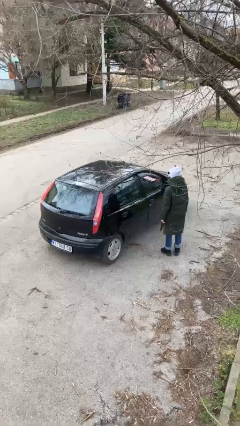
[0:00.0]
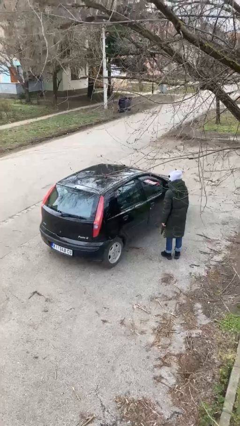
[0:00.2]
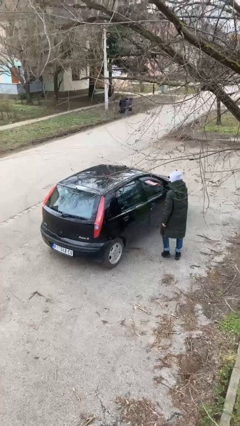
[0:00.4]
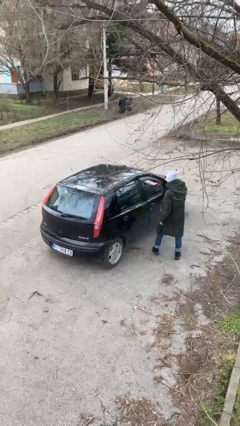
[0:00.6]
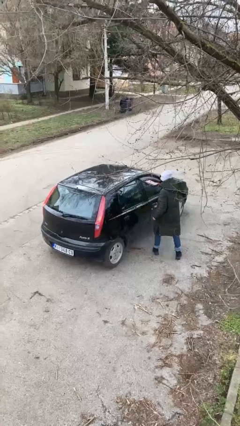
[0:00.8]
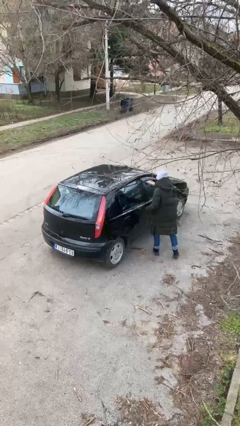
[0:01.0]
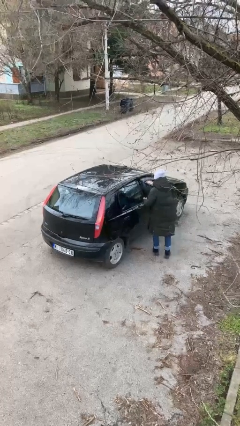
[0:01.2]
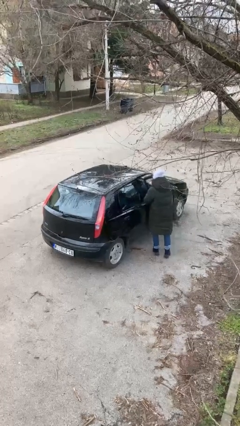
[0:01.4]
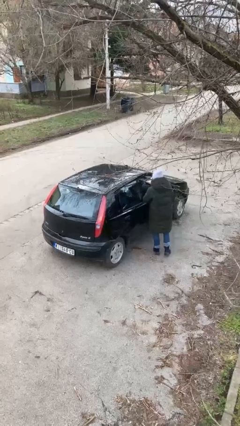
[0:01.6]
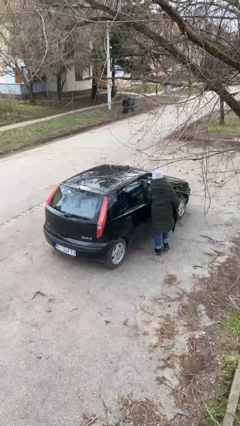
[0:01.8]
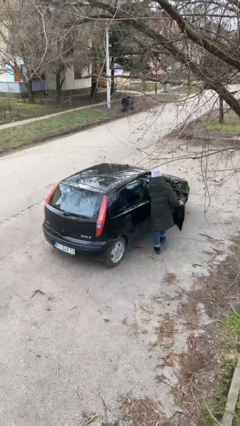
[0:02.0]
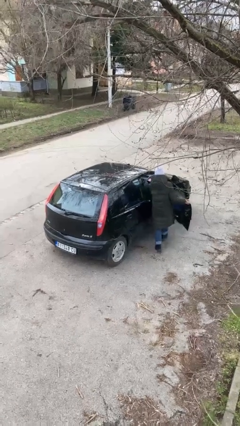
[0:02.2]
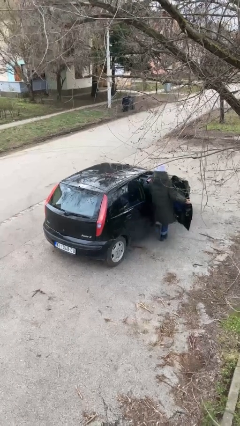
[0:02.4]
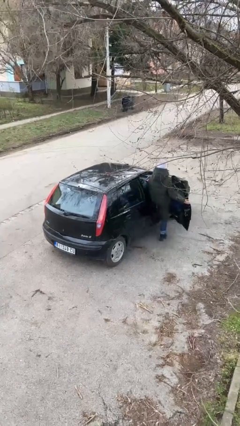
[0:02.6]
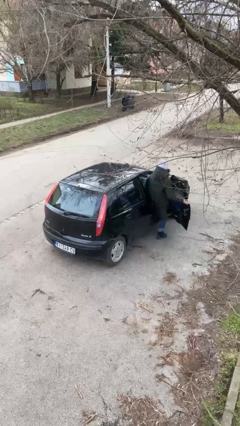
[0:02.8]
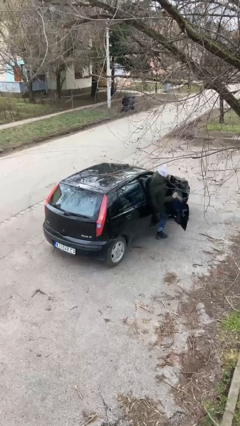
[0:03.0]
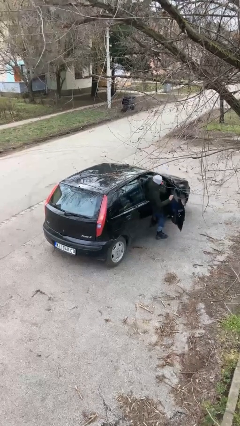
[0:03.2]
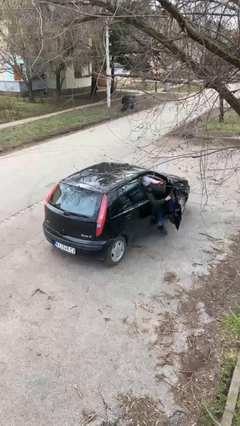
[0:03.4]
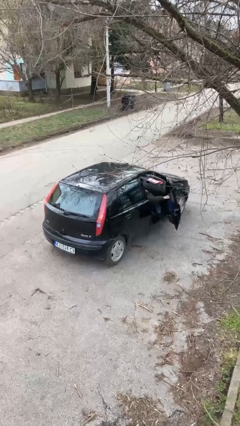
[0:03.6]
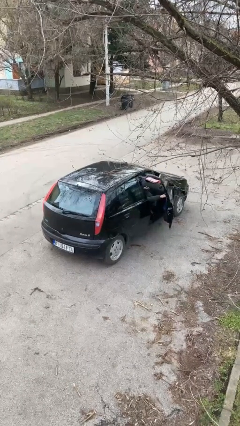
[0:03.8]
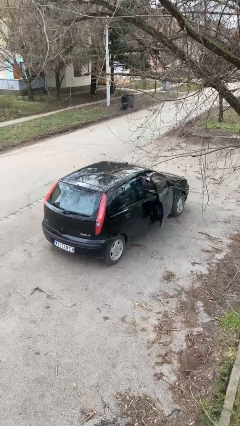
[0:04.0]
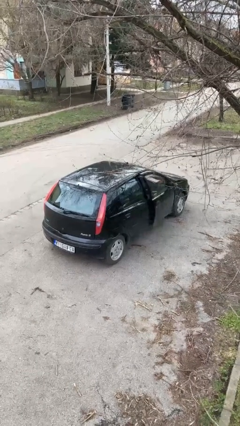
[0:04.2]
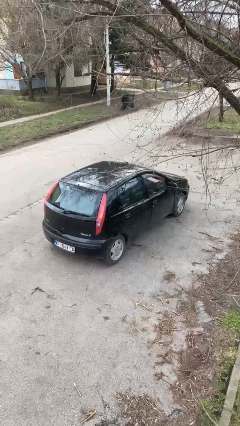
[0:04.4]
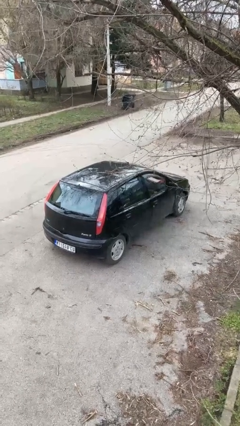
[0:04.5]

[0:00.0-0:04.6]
car picks up person

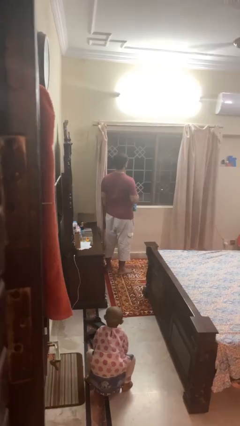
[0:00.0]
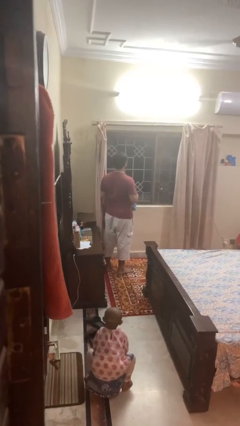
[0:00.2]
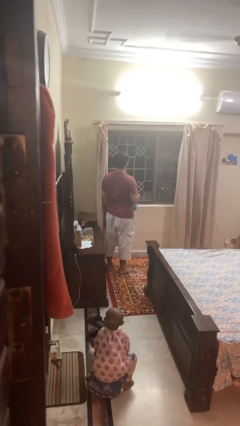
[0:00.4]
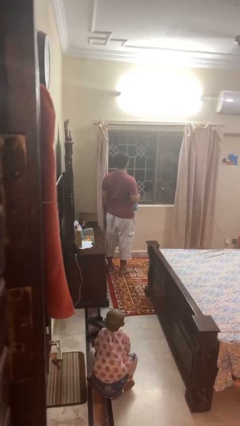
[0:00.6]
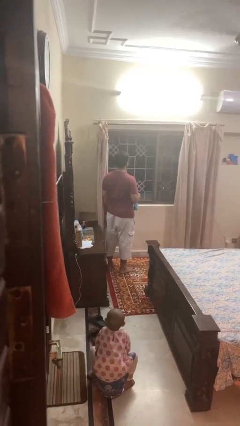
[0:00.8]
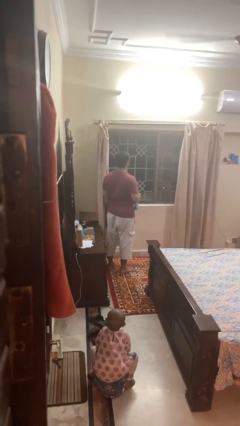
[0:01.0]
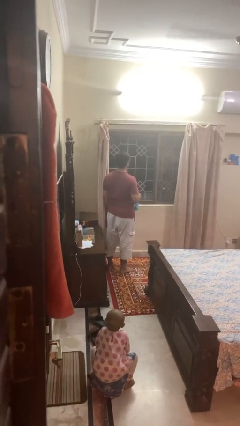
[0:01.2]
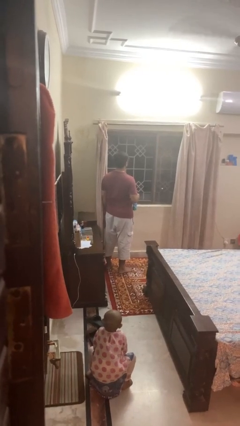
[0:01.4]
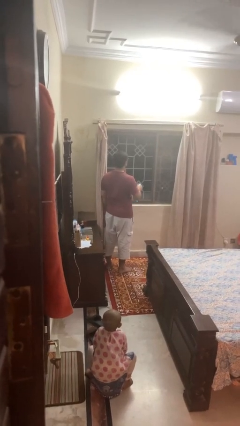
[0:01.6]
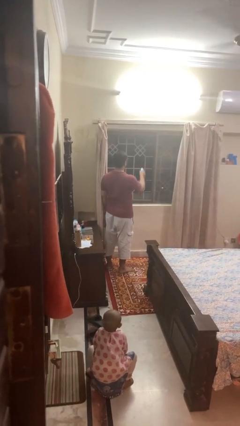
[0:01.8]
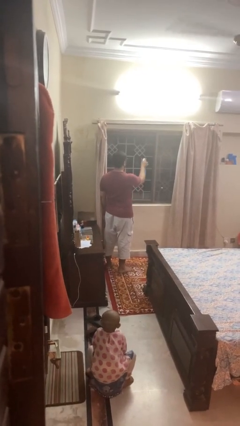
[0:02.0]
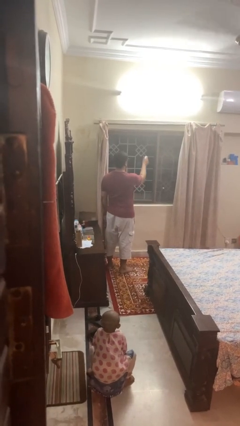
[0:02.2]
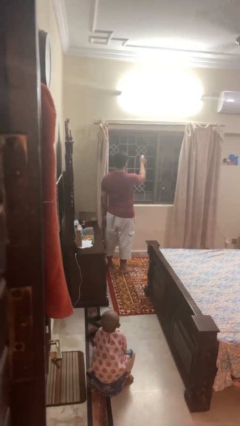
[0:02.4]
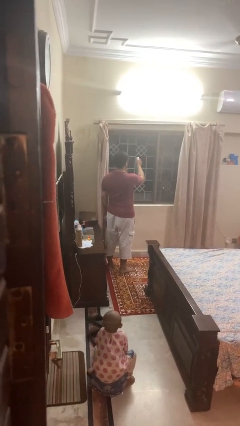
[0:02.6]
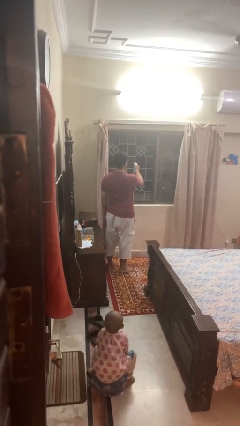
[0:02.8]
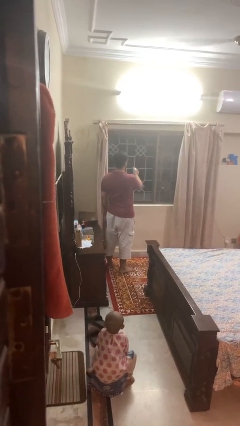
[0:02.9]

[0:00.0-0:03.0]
person sprays from bottle

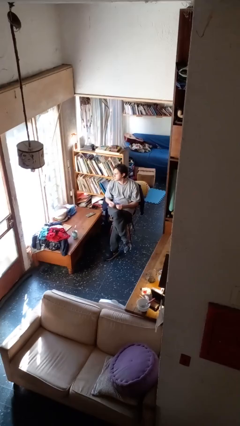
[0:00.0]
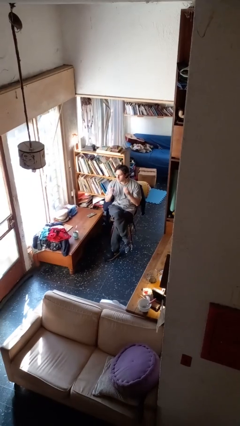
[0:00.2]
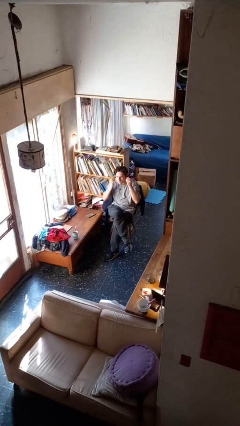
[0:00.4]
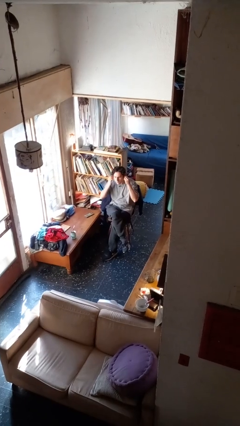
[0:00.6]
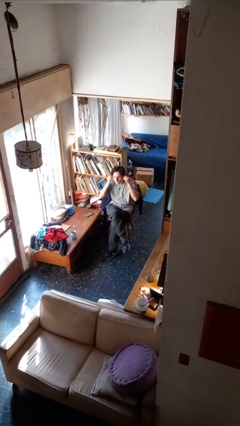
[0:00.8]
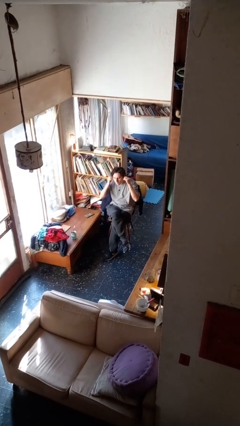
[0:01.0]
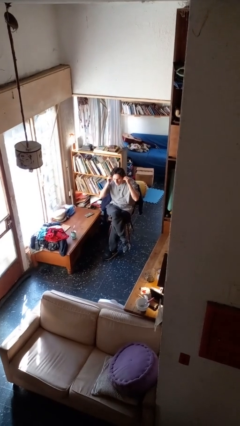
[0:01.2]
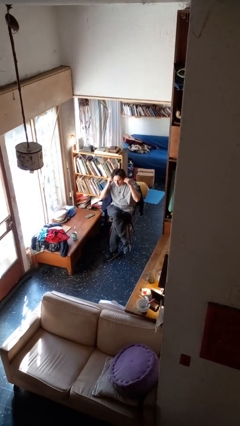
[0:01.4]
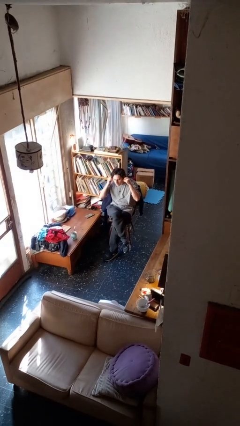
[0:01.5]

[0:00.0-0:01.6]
person puts on headphones

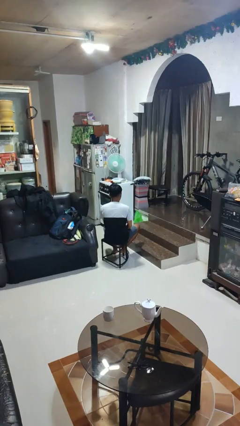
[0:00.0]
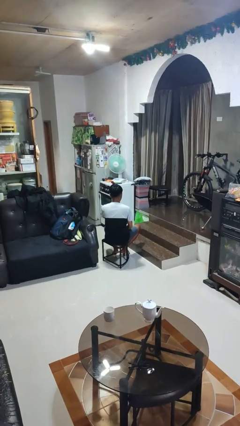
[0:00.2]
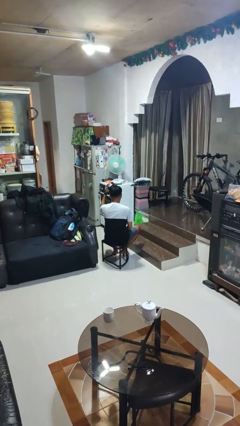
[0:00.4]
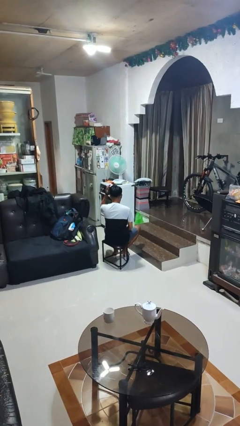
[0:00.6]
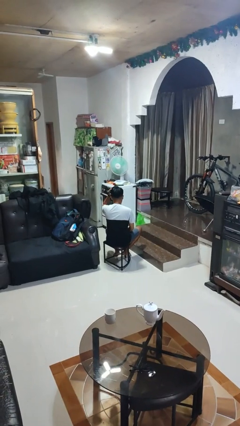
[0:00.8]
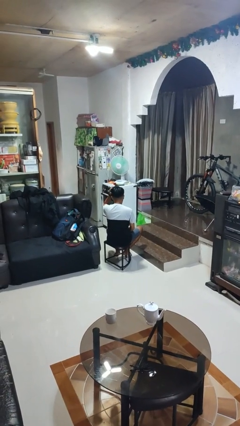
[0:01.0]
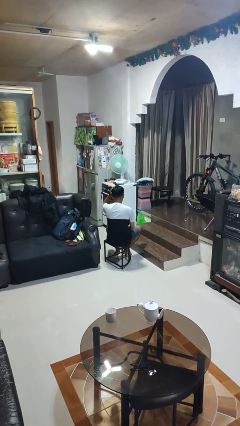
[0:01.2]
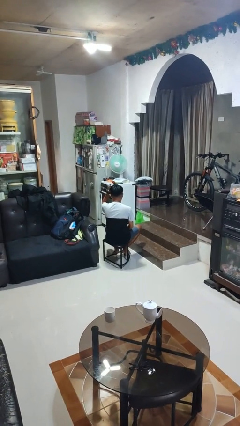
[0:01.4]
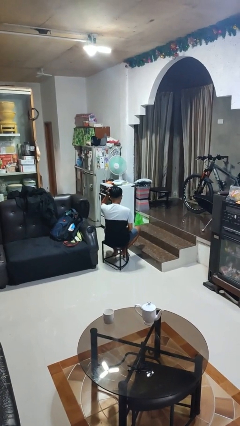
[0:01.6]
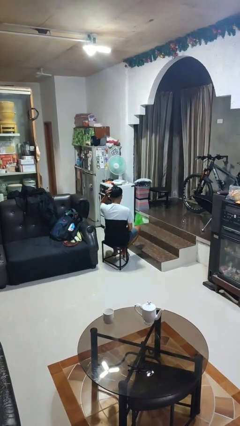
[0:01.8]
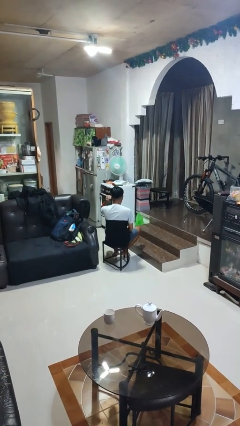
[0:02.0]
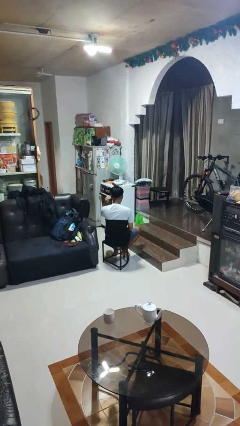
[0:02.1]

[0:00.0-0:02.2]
person pats head

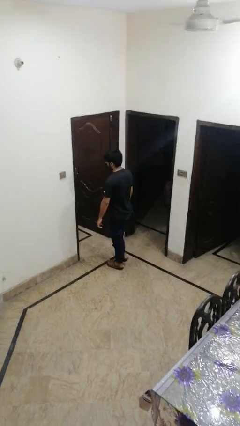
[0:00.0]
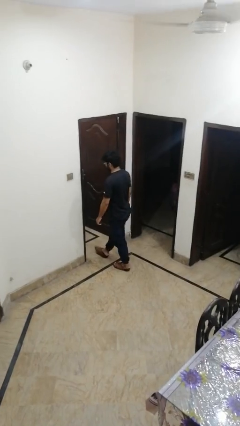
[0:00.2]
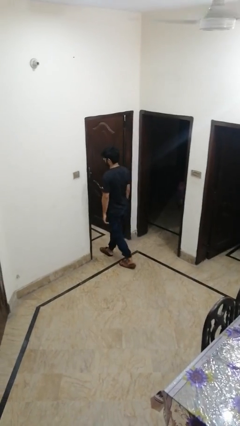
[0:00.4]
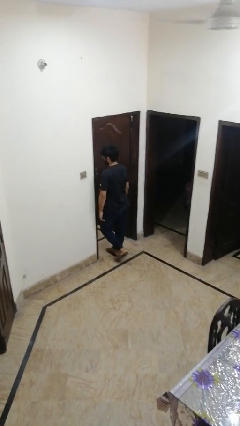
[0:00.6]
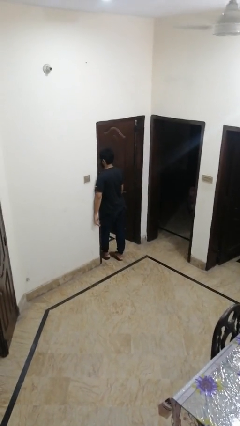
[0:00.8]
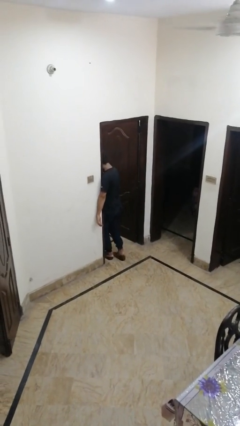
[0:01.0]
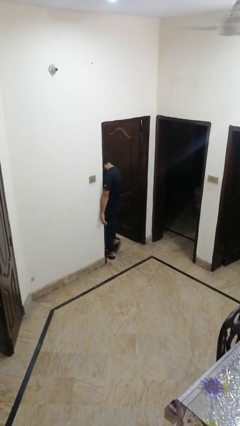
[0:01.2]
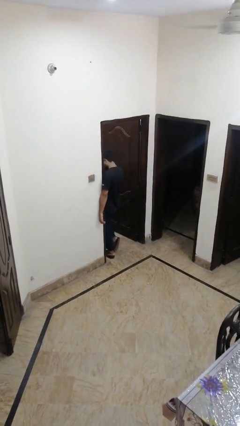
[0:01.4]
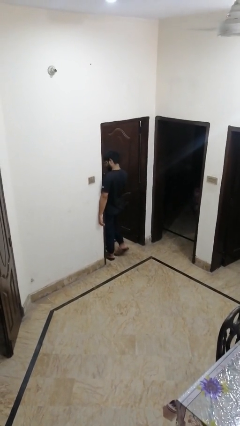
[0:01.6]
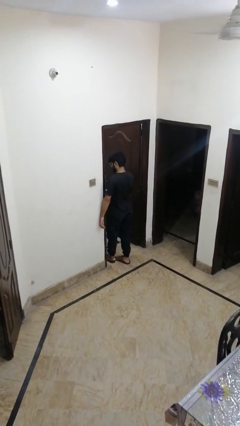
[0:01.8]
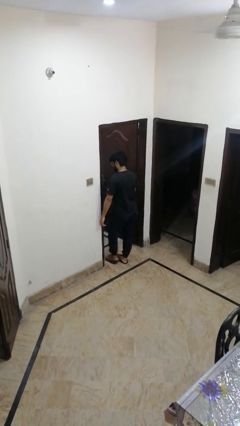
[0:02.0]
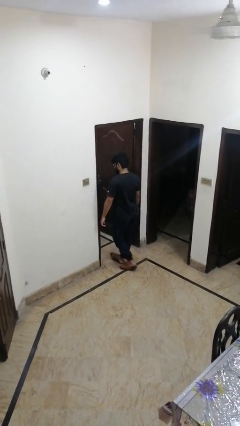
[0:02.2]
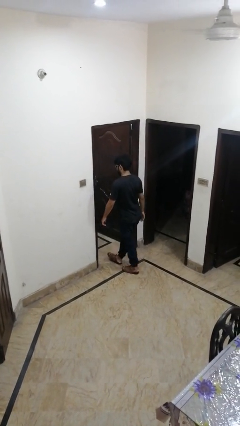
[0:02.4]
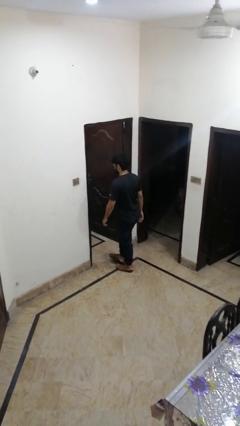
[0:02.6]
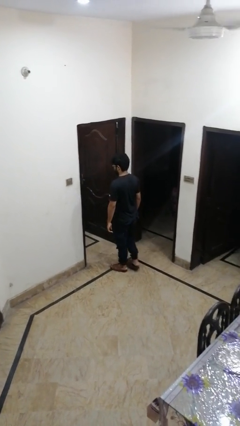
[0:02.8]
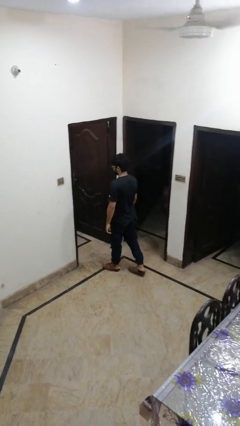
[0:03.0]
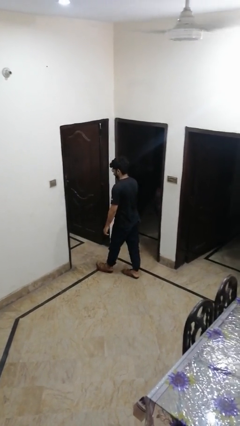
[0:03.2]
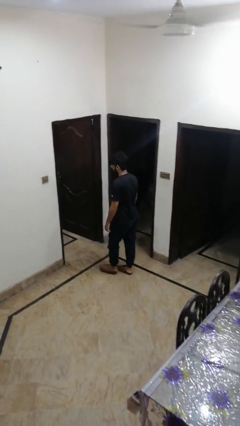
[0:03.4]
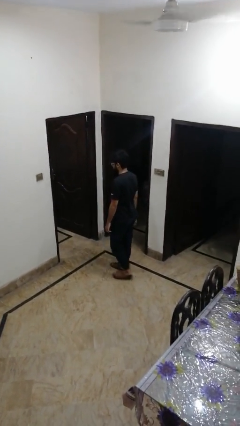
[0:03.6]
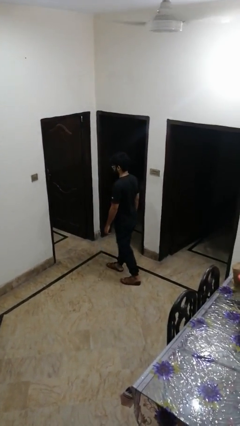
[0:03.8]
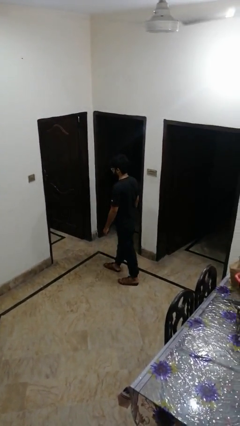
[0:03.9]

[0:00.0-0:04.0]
person bumps into wall

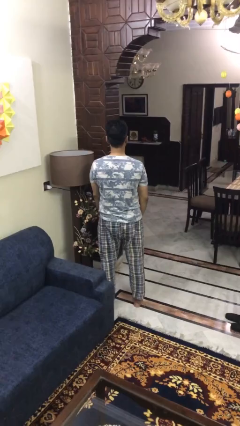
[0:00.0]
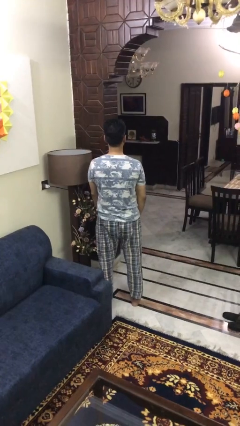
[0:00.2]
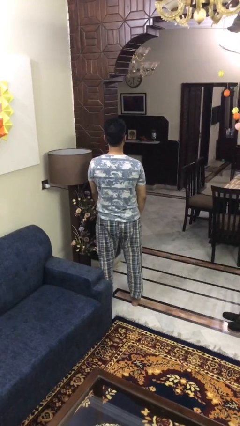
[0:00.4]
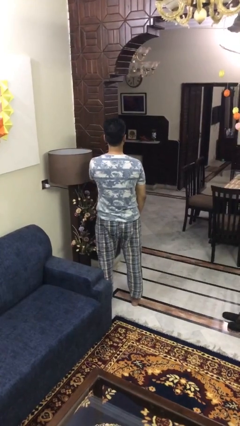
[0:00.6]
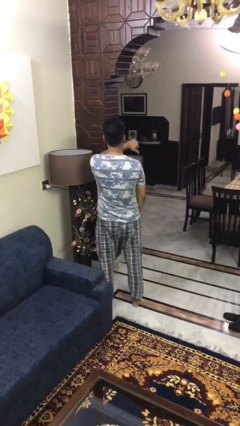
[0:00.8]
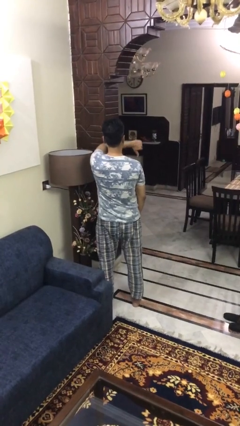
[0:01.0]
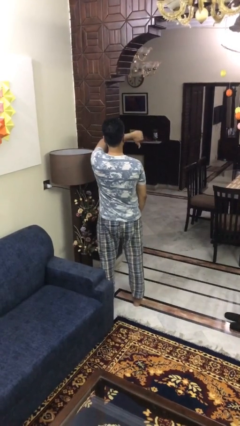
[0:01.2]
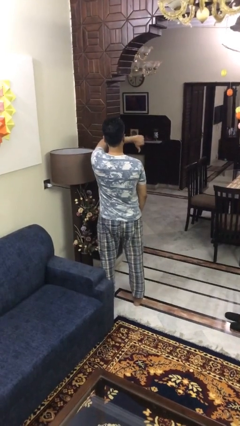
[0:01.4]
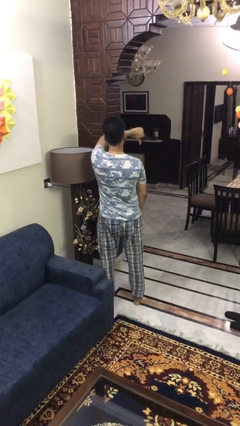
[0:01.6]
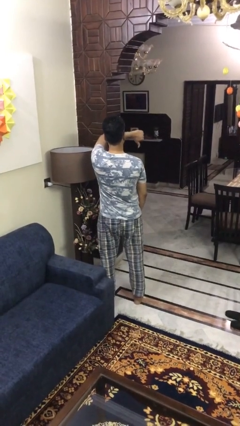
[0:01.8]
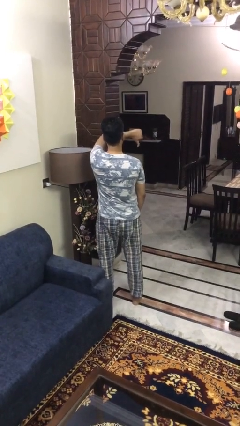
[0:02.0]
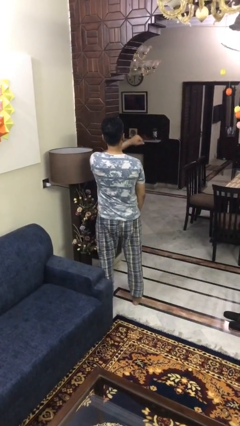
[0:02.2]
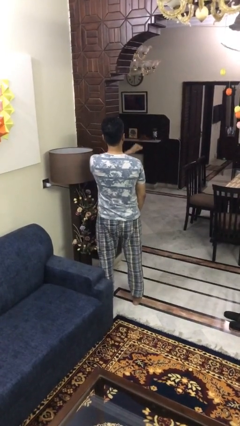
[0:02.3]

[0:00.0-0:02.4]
person gestures thumbs down
